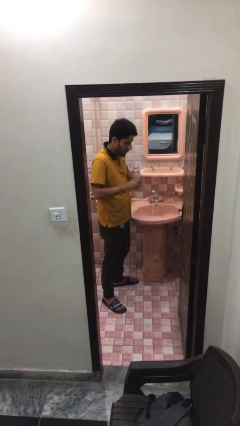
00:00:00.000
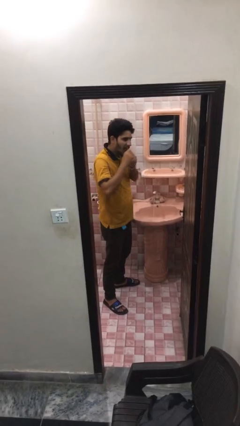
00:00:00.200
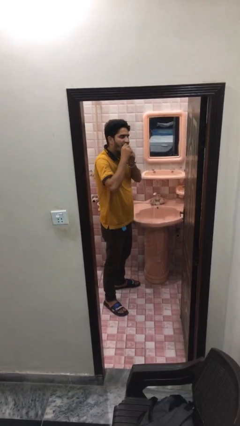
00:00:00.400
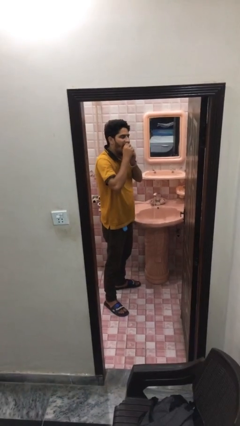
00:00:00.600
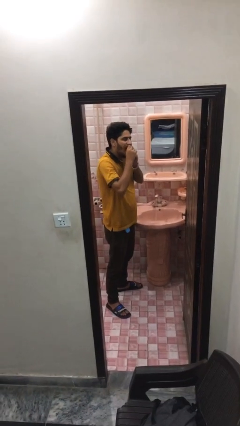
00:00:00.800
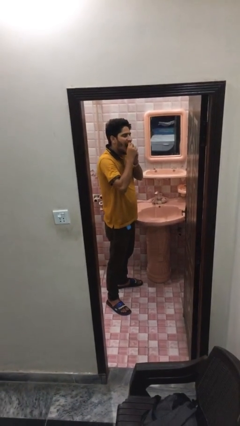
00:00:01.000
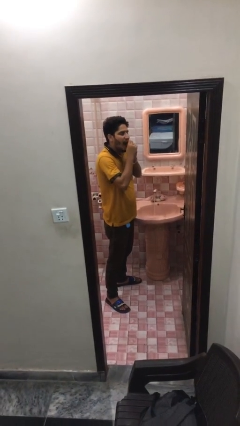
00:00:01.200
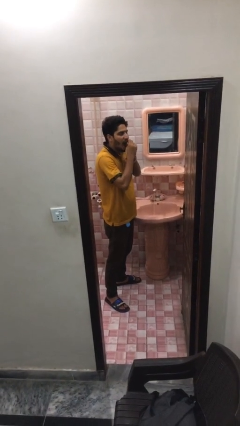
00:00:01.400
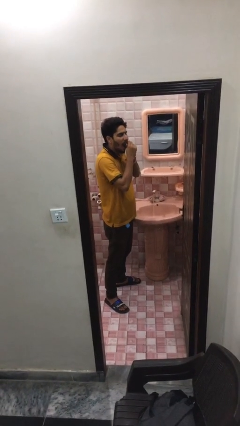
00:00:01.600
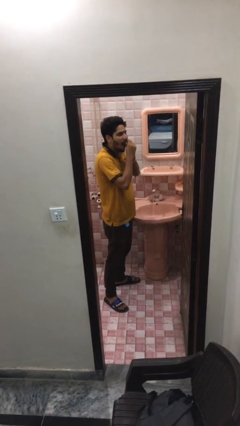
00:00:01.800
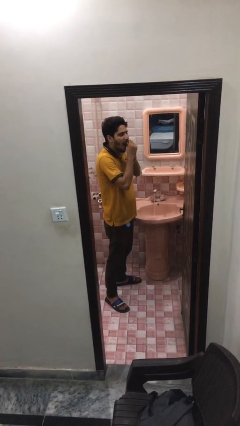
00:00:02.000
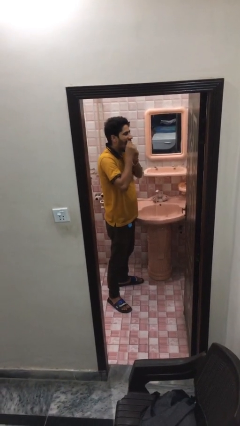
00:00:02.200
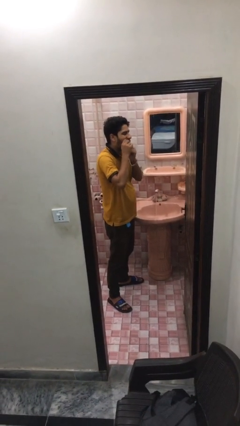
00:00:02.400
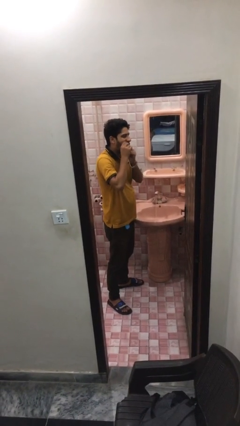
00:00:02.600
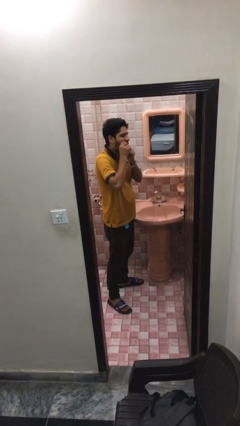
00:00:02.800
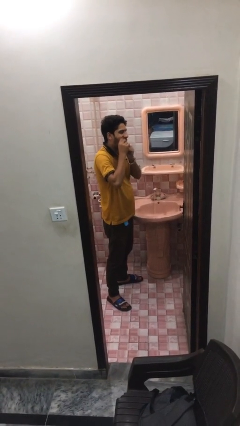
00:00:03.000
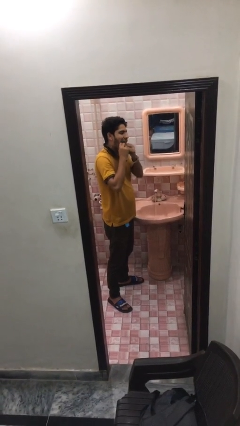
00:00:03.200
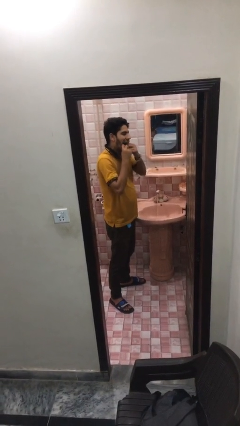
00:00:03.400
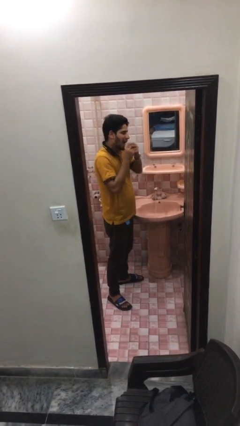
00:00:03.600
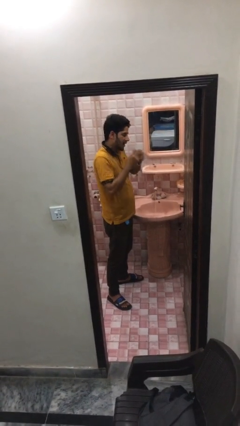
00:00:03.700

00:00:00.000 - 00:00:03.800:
person flosses

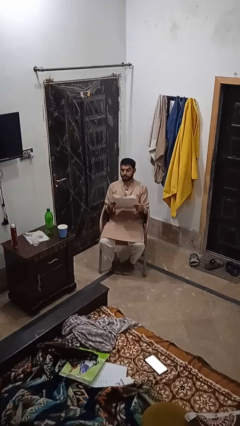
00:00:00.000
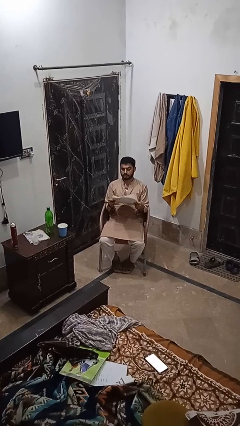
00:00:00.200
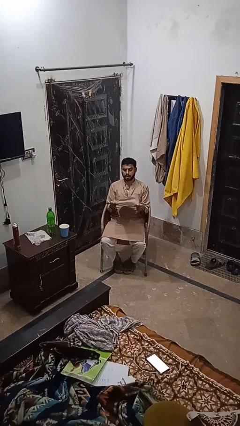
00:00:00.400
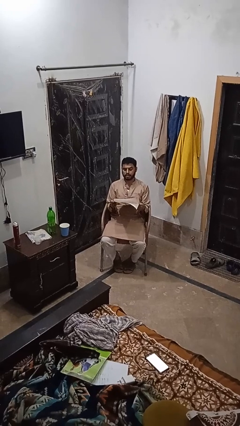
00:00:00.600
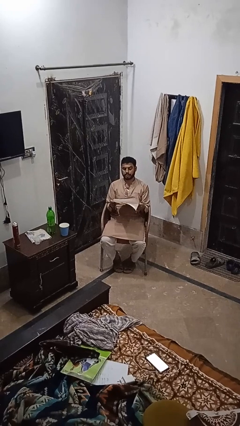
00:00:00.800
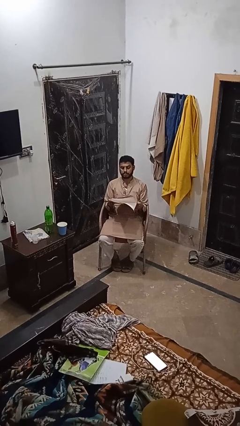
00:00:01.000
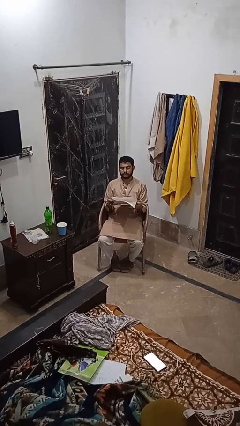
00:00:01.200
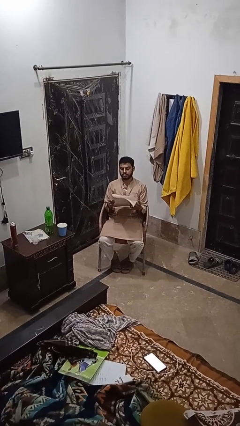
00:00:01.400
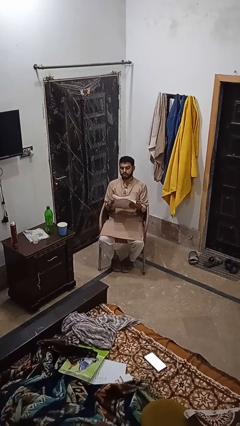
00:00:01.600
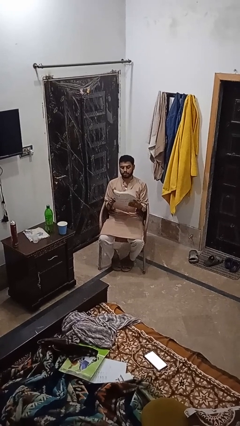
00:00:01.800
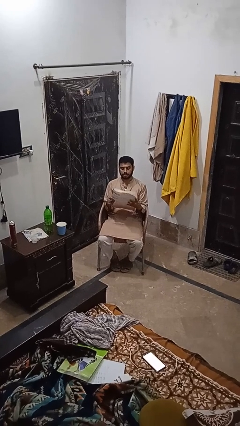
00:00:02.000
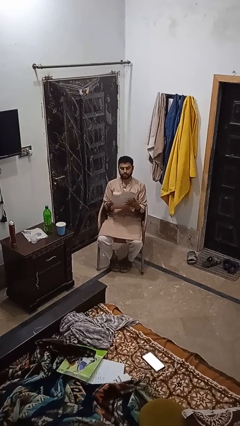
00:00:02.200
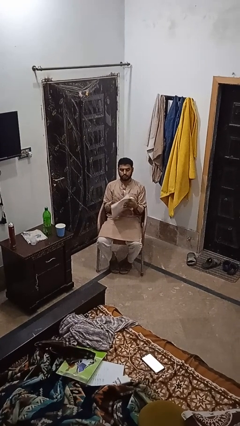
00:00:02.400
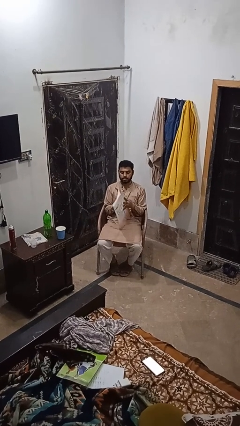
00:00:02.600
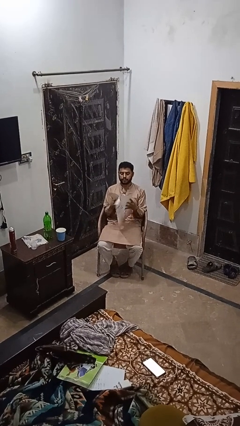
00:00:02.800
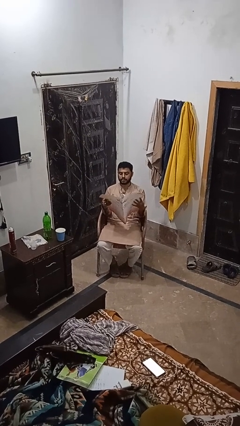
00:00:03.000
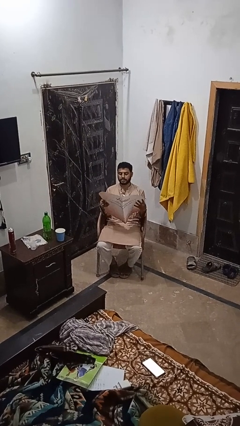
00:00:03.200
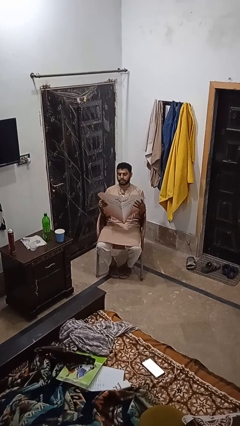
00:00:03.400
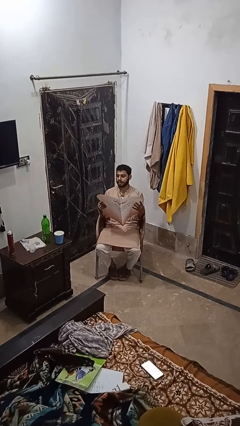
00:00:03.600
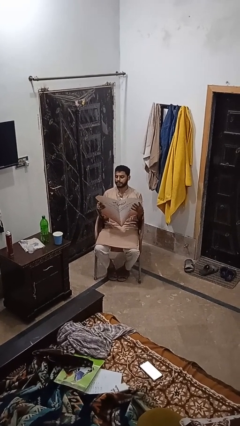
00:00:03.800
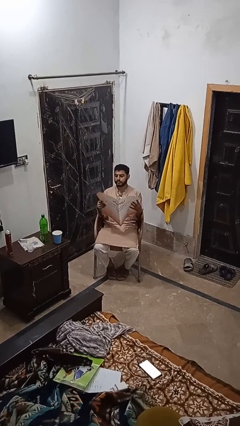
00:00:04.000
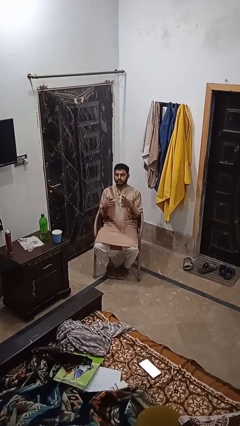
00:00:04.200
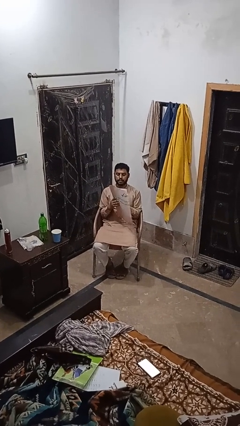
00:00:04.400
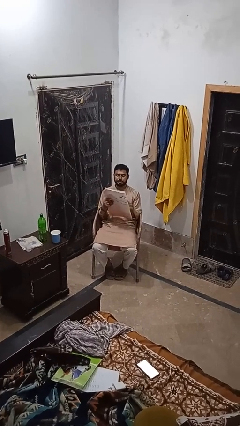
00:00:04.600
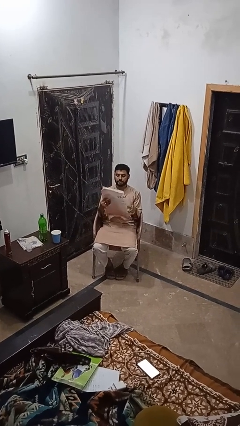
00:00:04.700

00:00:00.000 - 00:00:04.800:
person reads newspaper

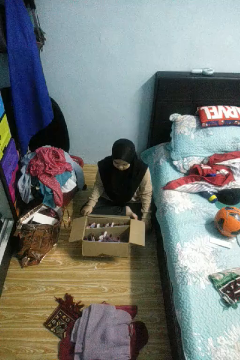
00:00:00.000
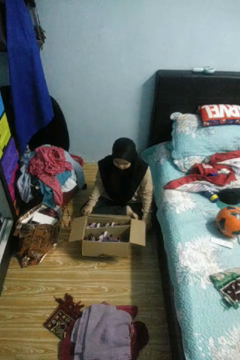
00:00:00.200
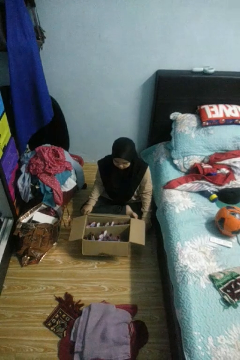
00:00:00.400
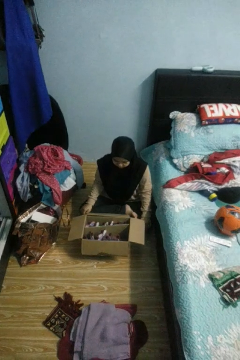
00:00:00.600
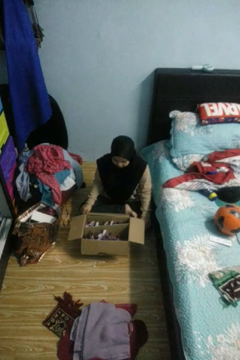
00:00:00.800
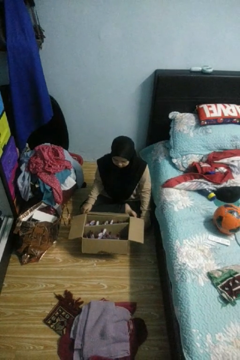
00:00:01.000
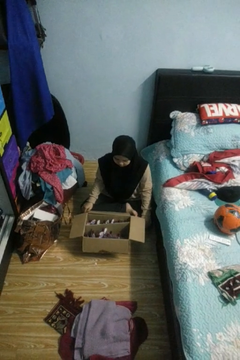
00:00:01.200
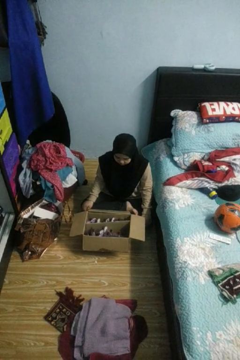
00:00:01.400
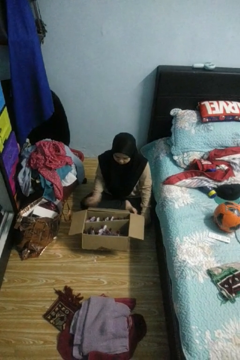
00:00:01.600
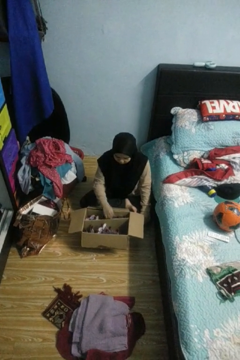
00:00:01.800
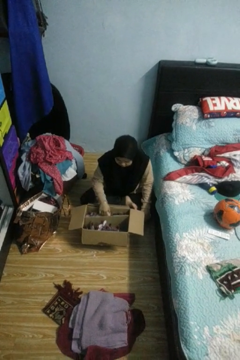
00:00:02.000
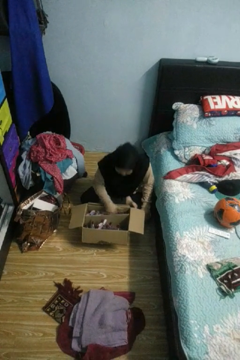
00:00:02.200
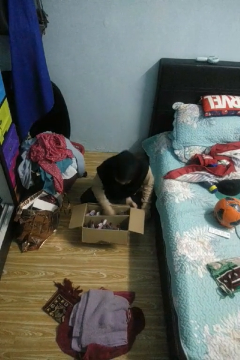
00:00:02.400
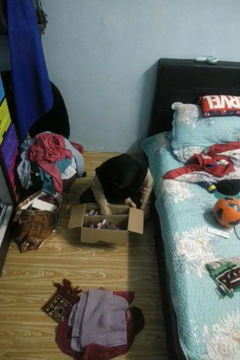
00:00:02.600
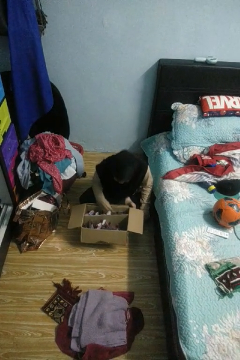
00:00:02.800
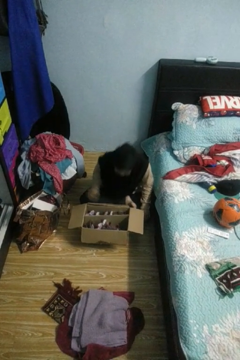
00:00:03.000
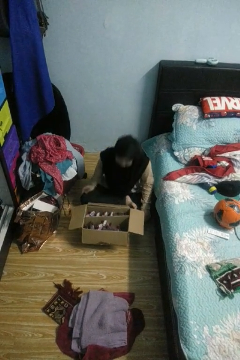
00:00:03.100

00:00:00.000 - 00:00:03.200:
person searches in box

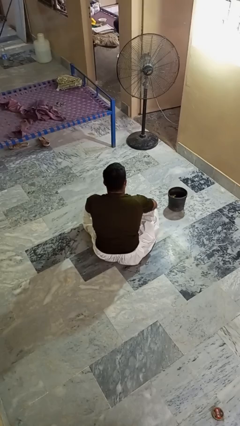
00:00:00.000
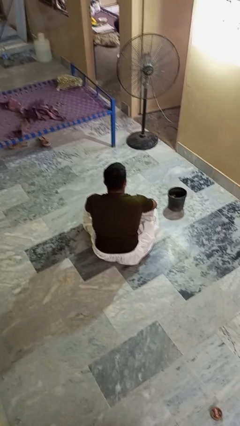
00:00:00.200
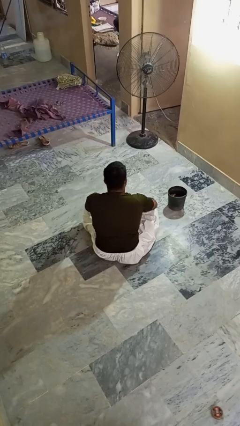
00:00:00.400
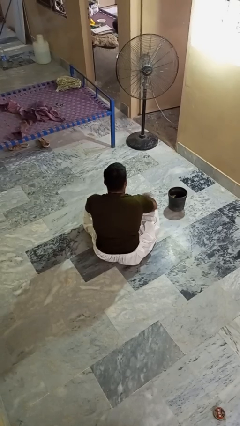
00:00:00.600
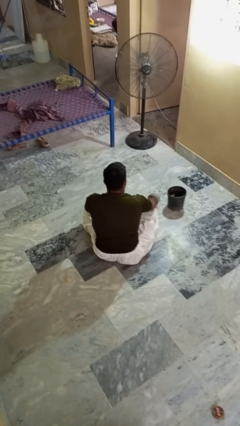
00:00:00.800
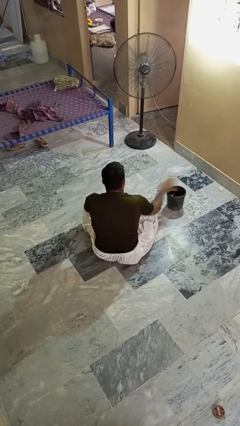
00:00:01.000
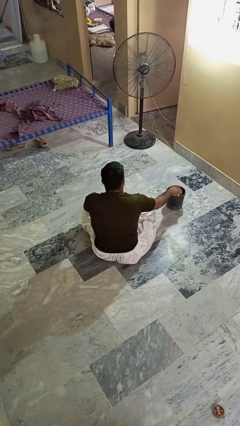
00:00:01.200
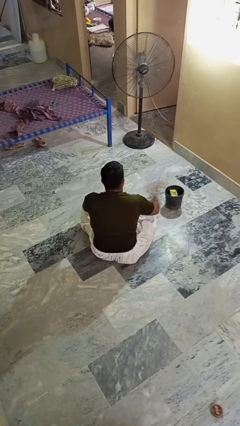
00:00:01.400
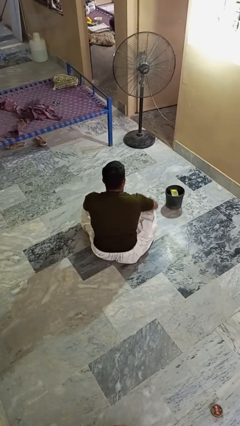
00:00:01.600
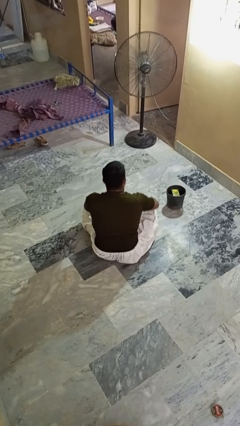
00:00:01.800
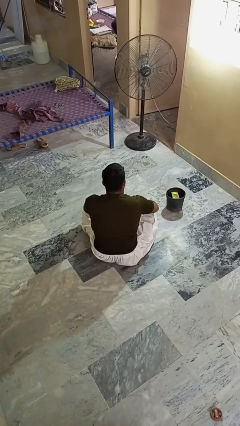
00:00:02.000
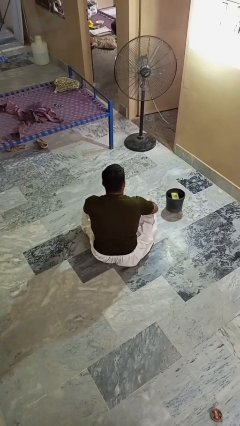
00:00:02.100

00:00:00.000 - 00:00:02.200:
person puts object into basket

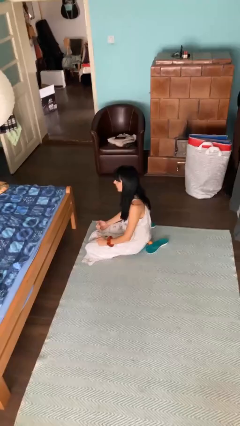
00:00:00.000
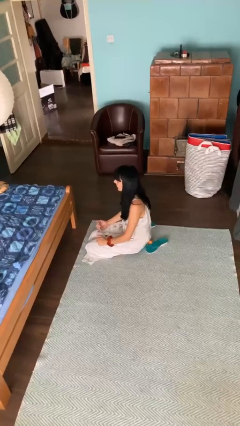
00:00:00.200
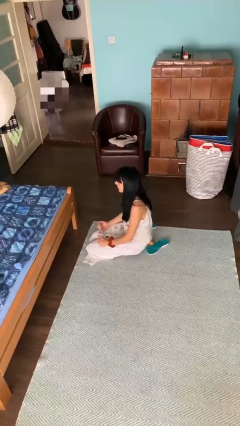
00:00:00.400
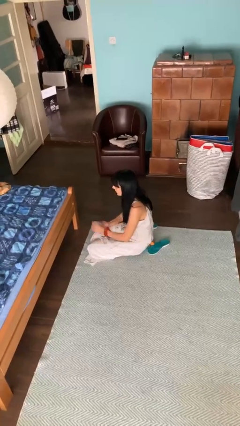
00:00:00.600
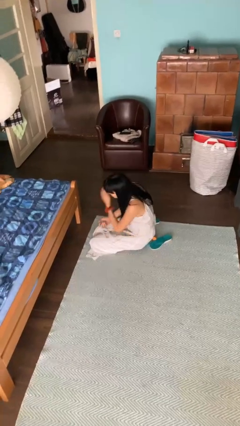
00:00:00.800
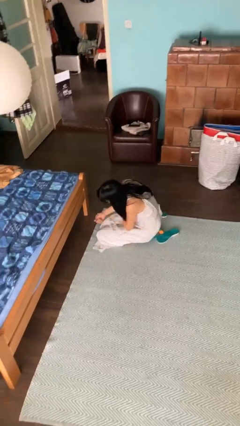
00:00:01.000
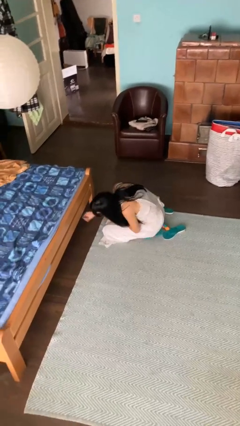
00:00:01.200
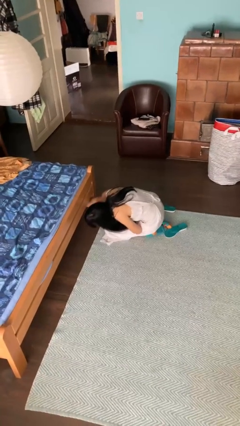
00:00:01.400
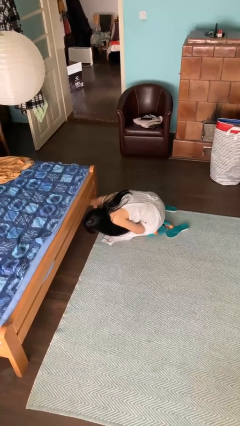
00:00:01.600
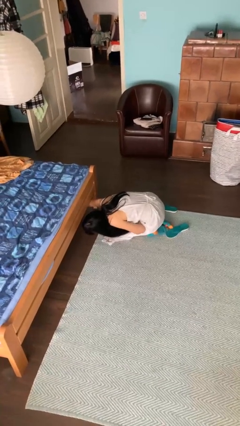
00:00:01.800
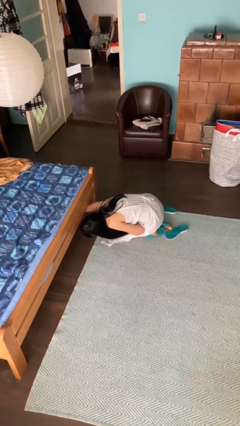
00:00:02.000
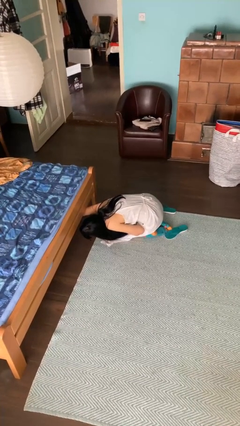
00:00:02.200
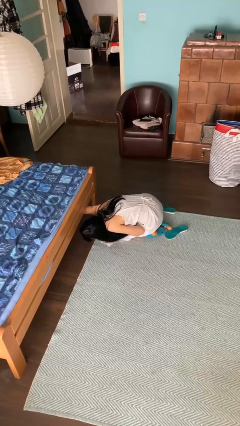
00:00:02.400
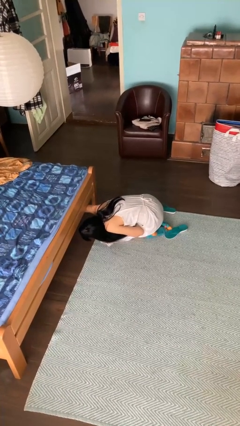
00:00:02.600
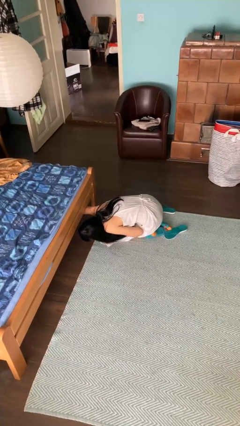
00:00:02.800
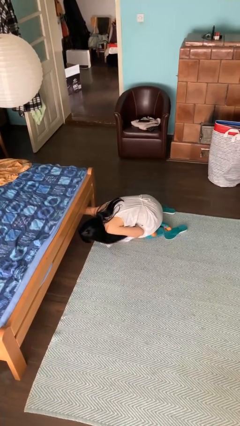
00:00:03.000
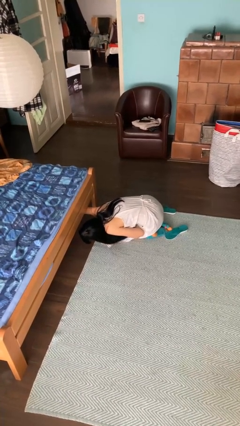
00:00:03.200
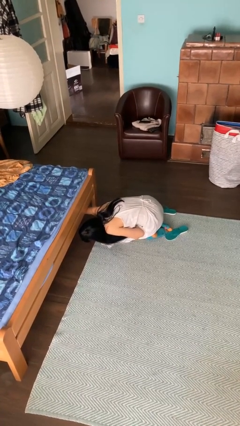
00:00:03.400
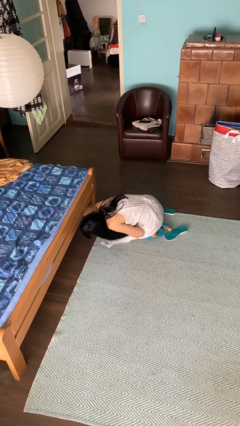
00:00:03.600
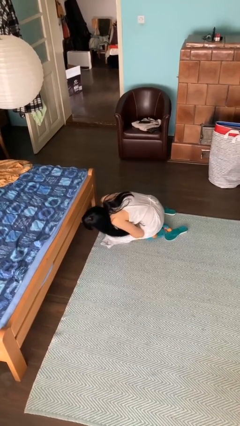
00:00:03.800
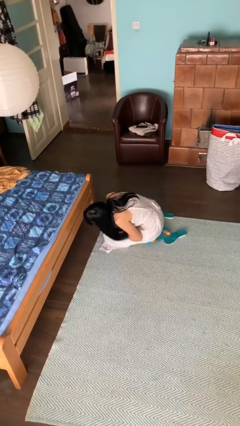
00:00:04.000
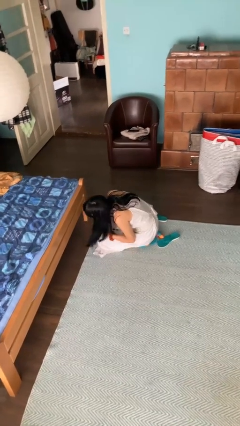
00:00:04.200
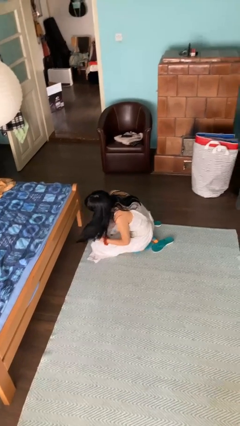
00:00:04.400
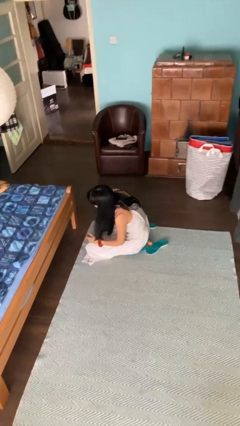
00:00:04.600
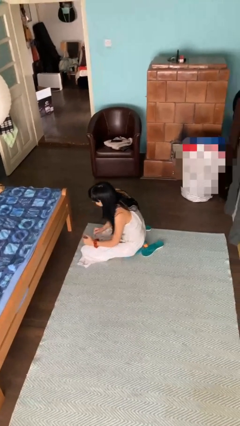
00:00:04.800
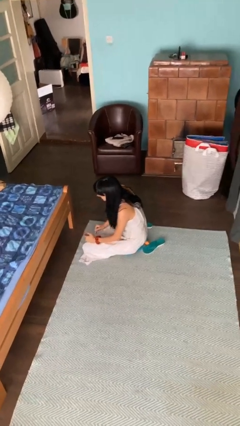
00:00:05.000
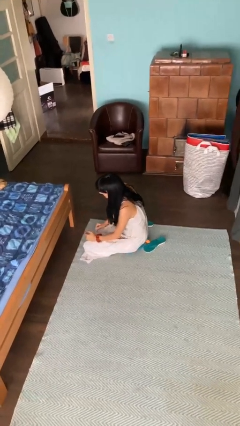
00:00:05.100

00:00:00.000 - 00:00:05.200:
person searches under bed
